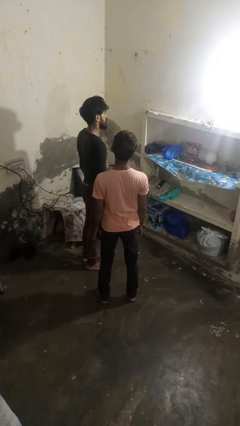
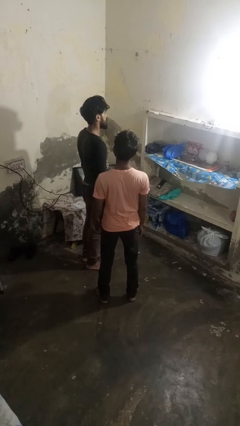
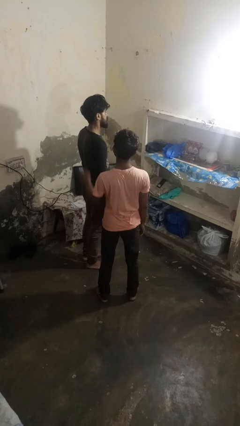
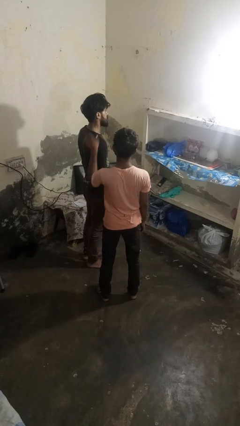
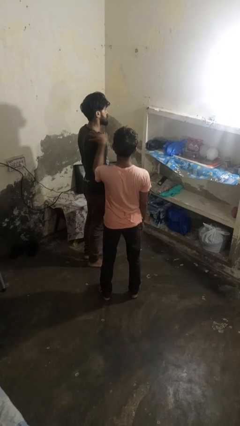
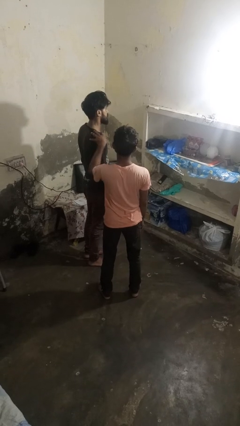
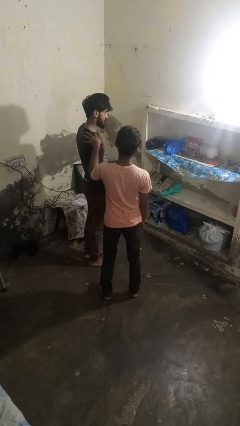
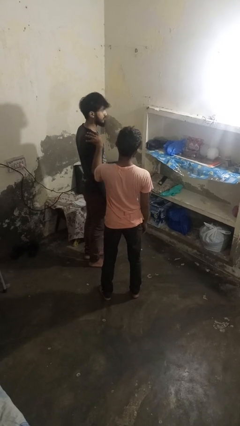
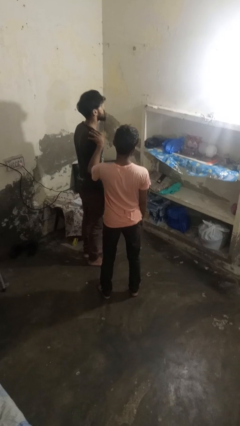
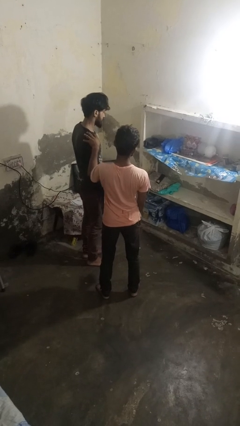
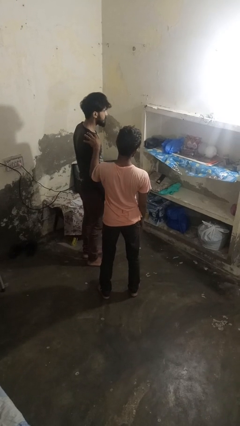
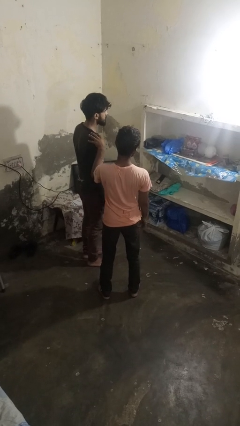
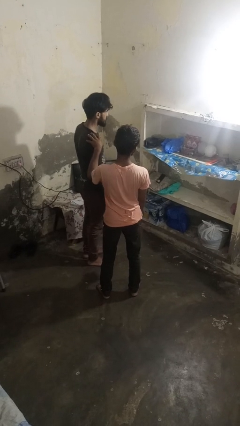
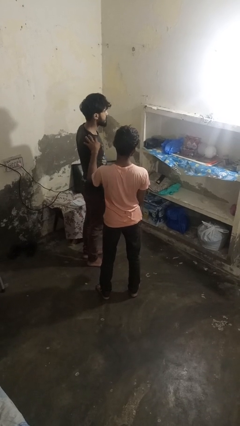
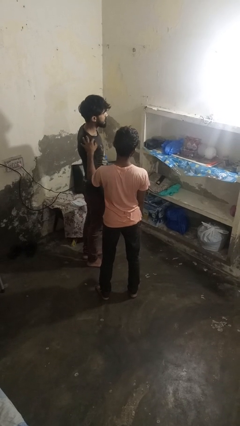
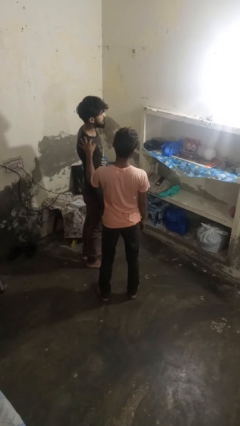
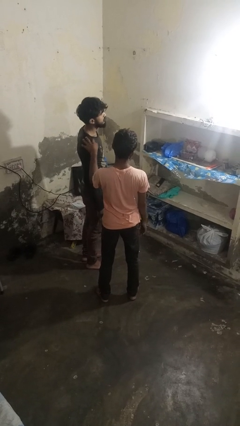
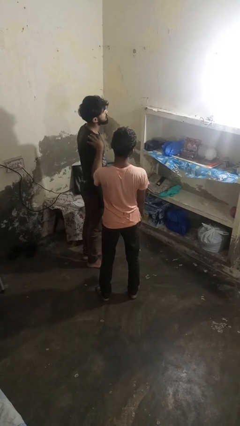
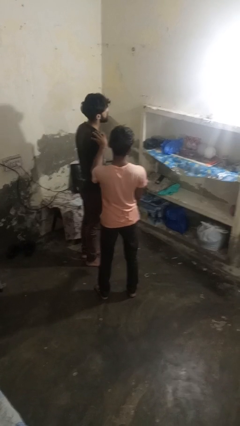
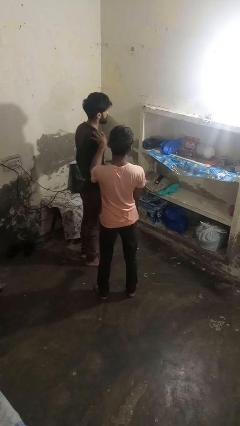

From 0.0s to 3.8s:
person grabs person by shoulder

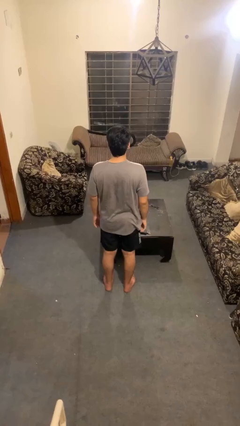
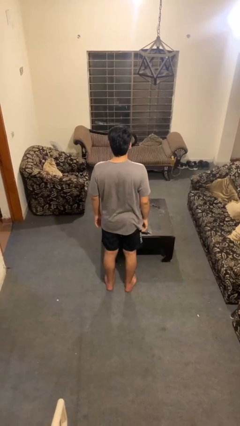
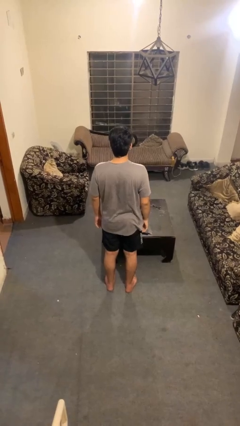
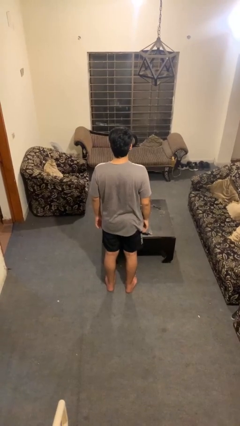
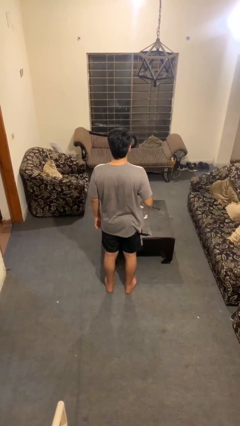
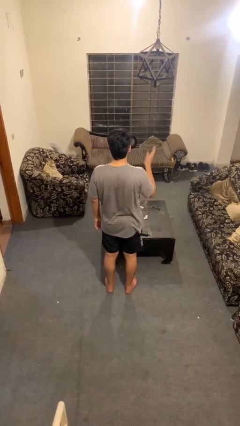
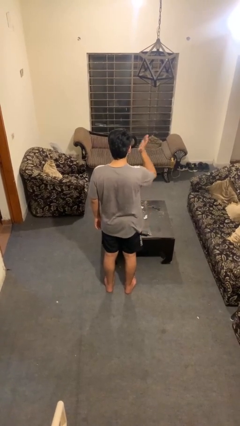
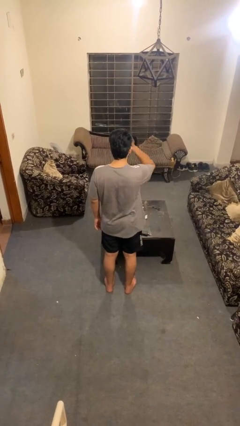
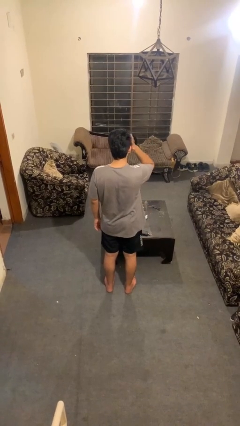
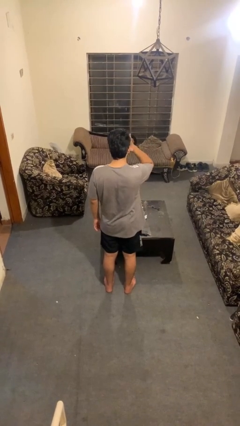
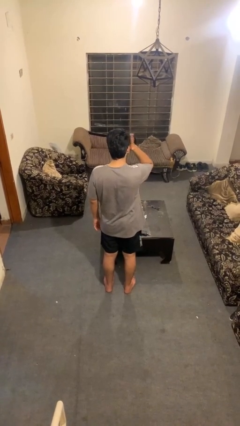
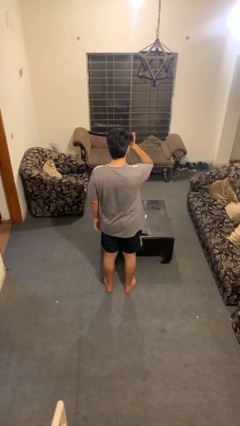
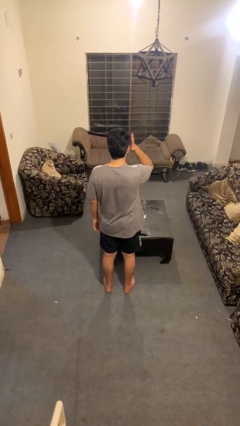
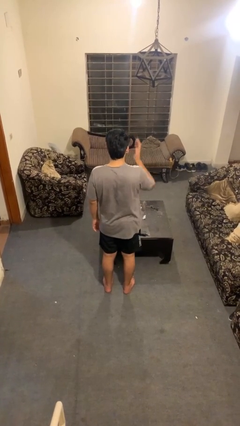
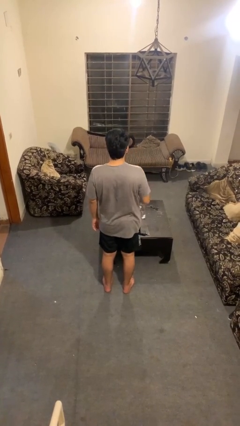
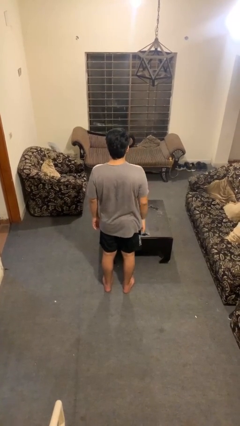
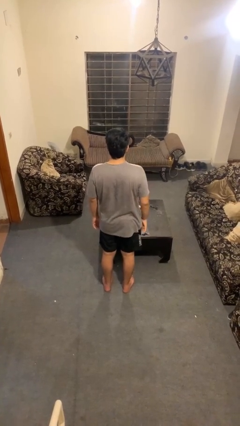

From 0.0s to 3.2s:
person pats head

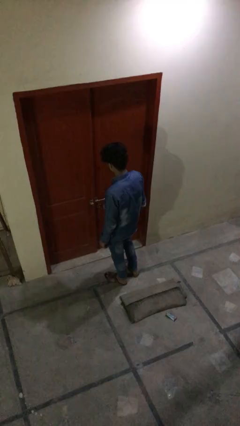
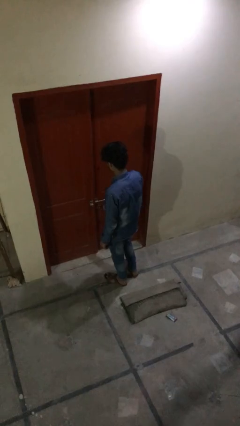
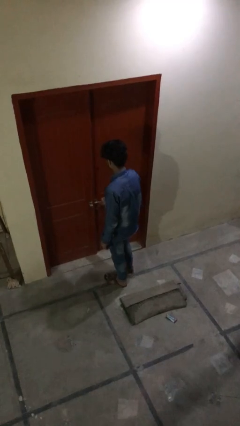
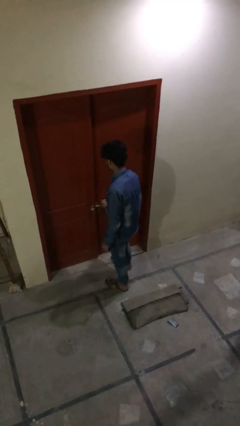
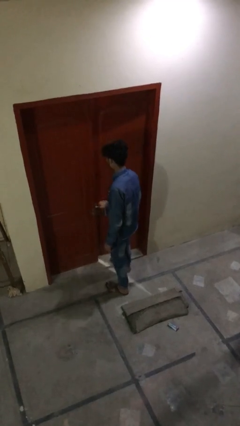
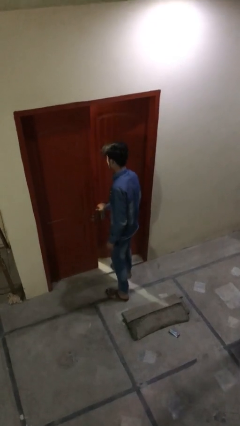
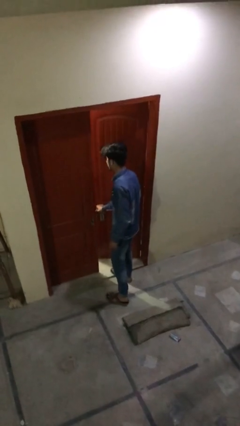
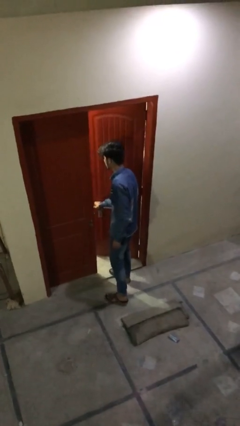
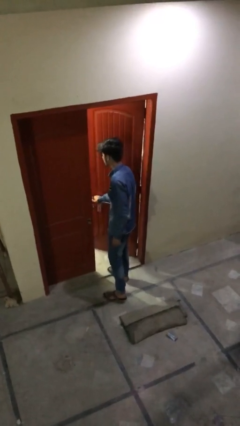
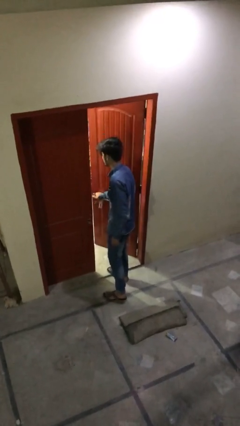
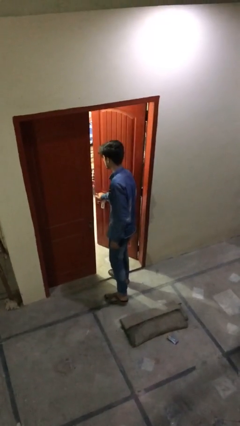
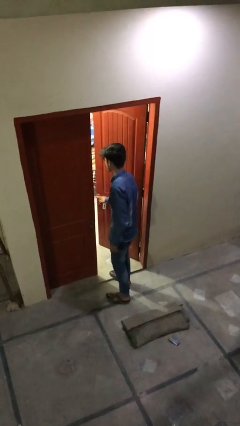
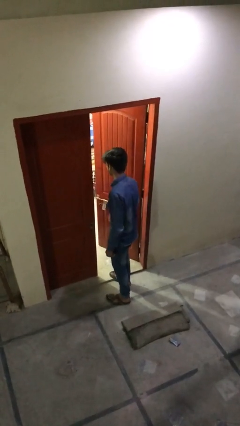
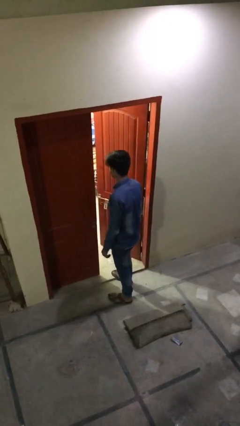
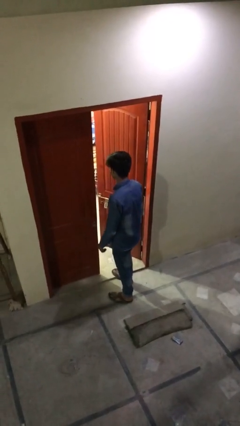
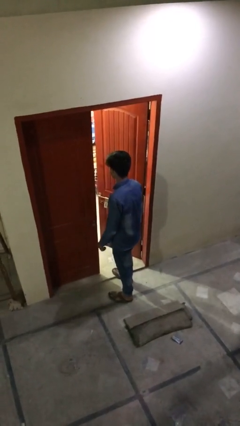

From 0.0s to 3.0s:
person opens facility door

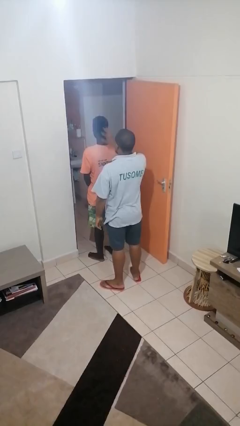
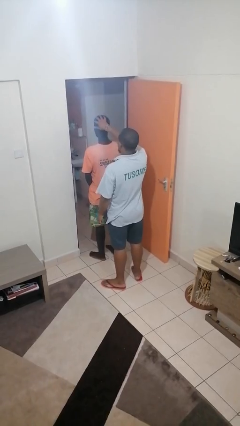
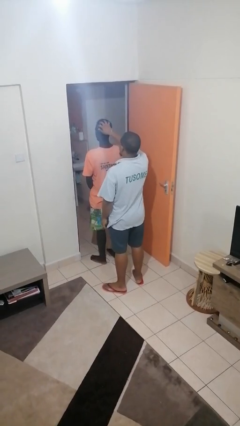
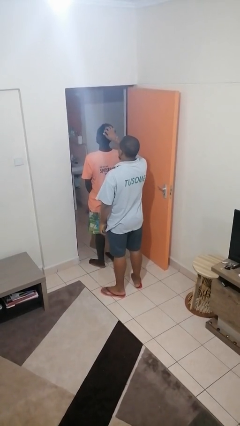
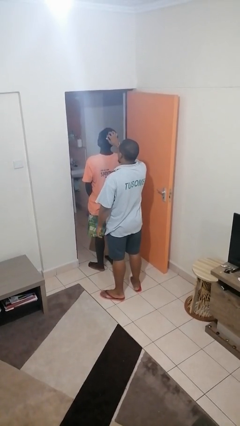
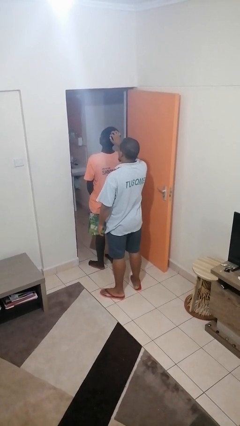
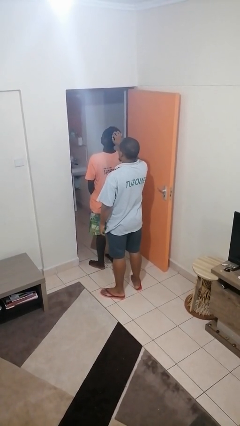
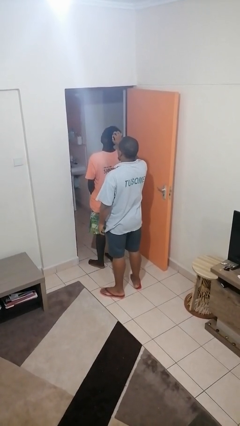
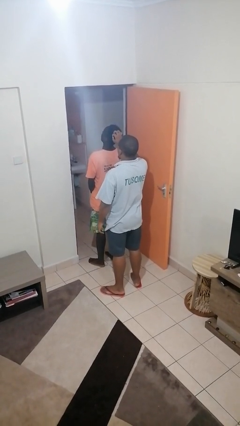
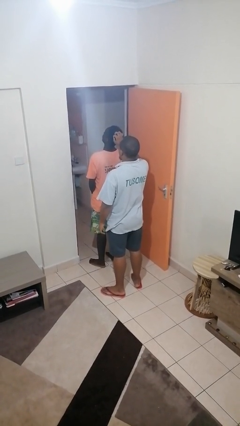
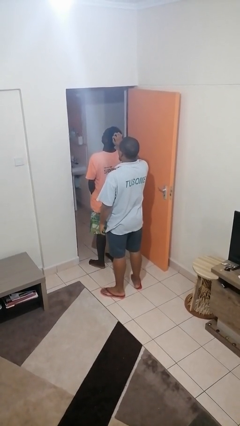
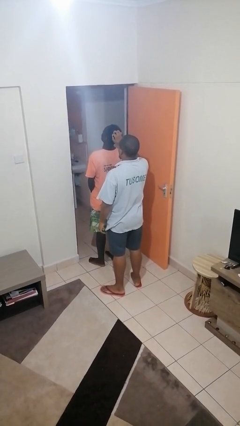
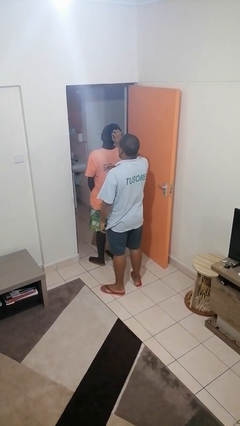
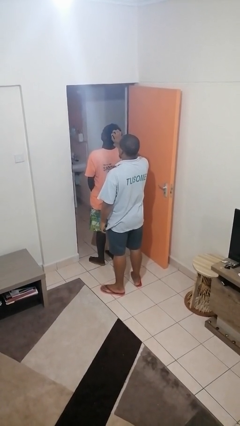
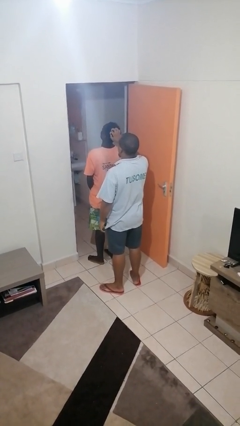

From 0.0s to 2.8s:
person grabs person by hair

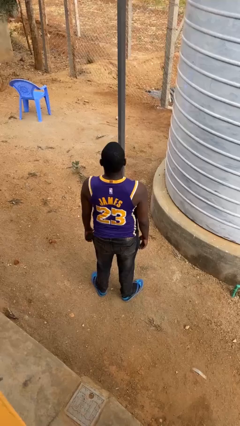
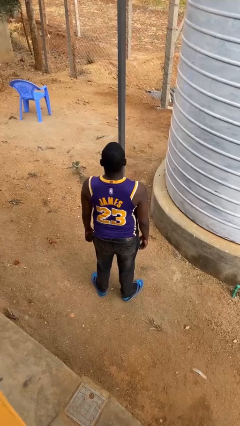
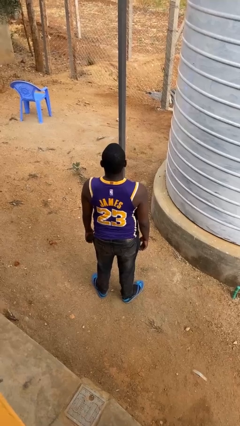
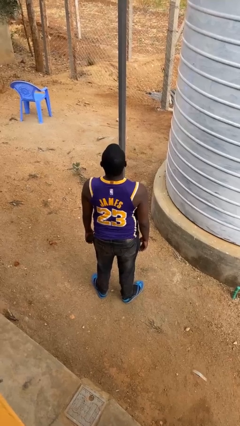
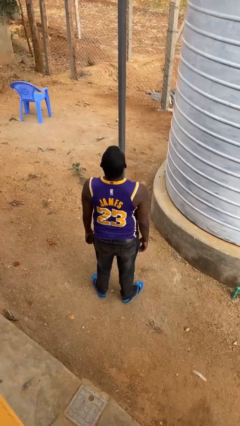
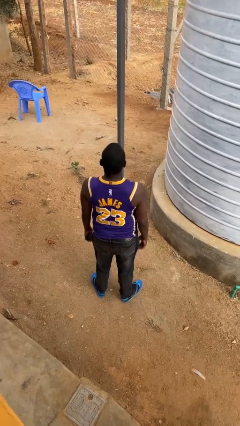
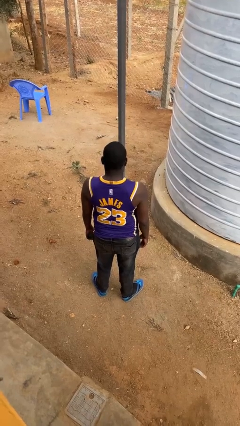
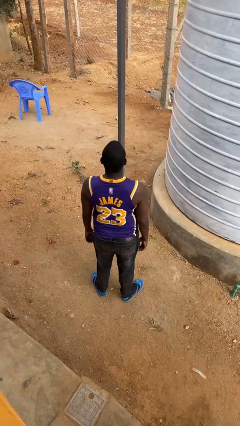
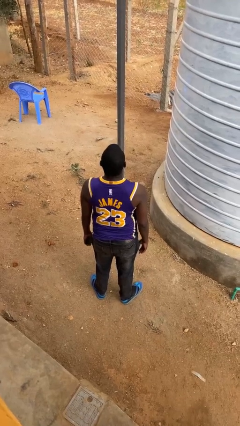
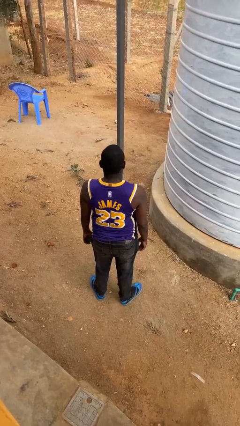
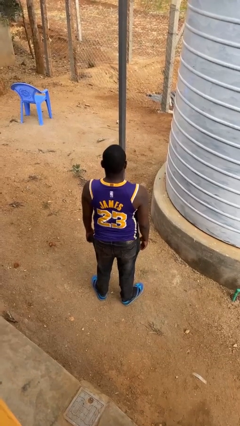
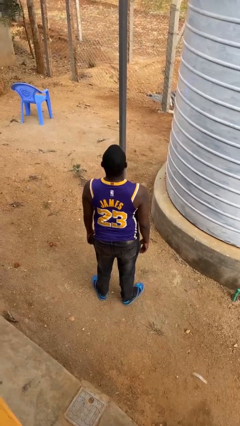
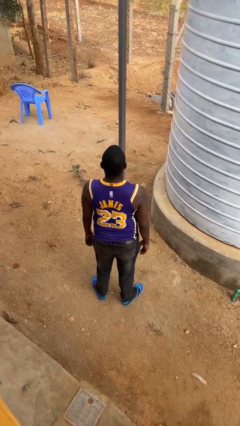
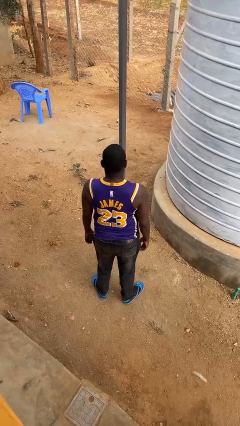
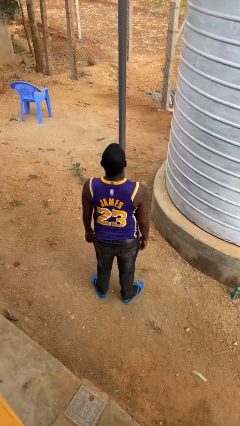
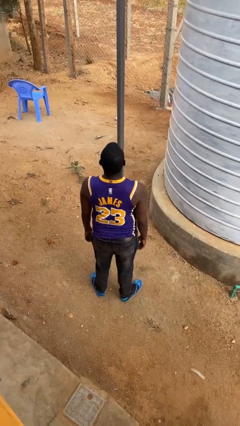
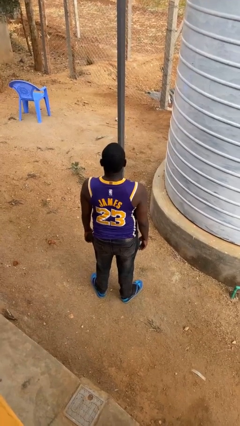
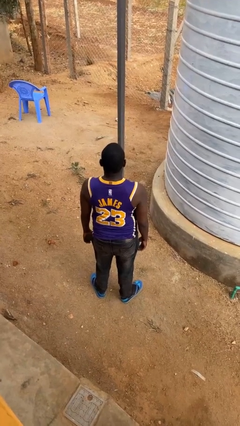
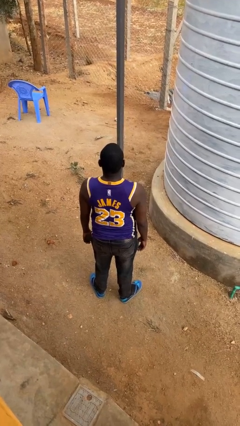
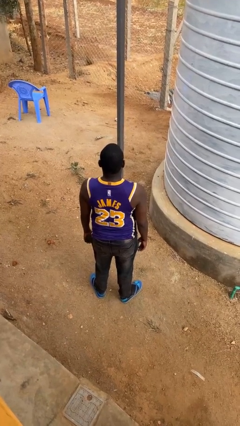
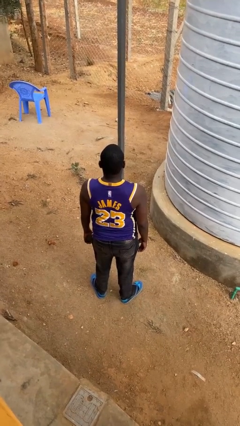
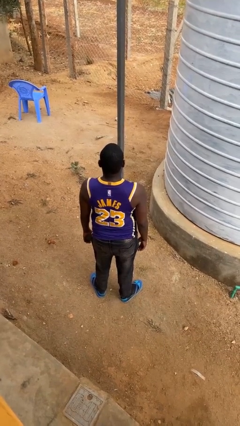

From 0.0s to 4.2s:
person nods head

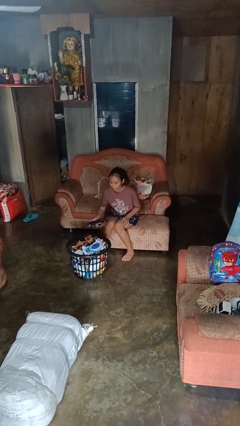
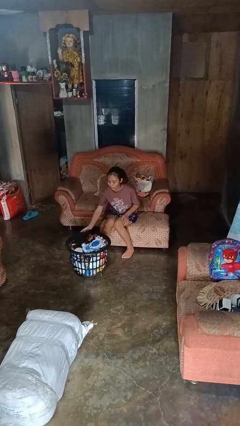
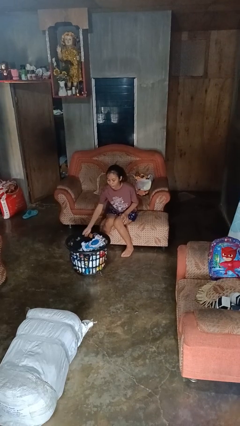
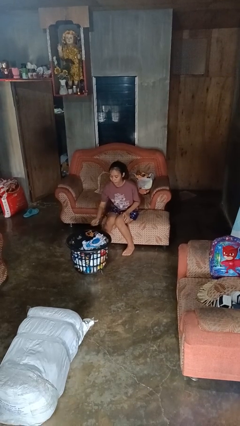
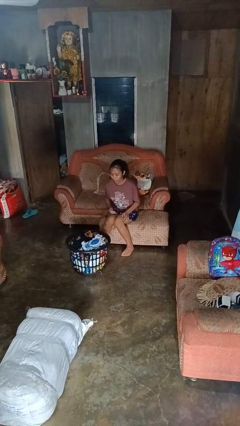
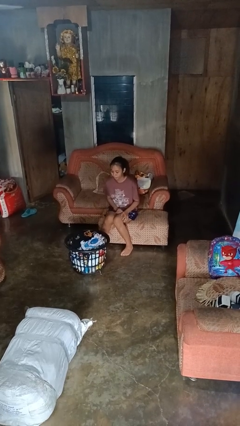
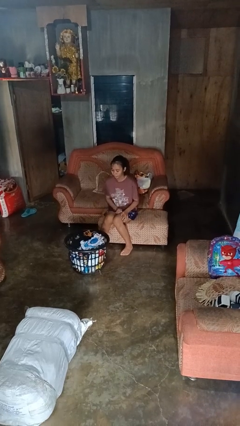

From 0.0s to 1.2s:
person puts object into basket
